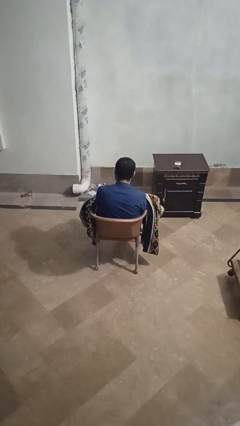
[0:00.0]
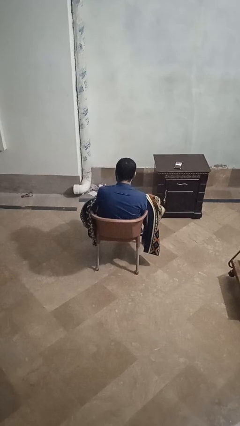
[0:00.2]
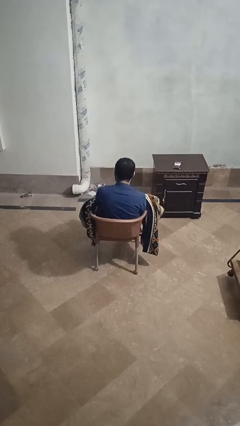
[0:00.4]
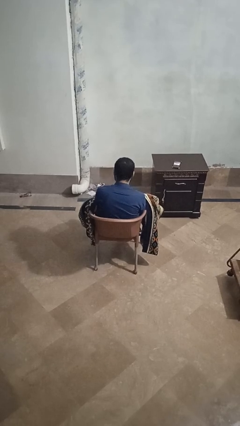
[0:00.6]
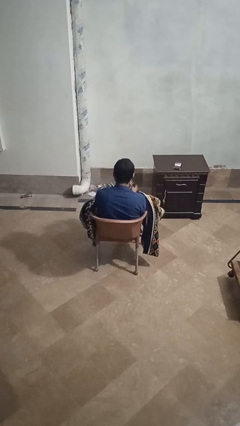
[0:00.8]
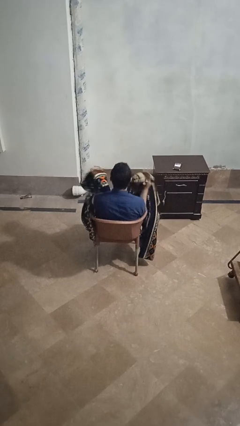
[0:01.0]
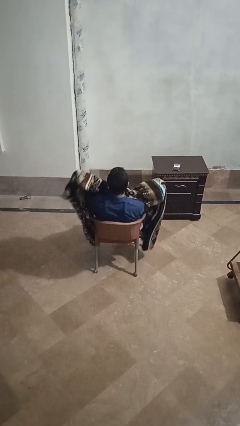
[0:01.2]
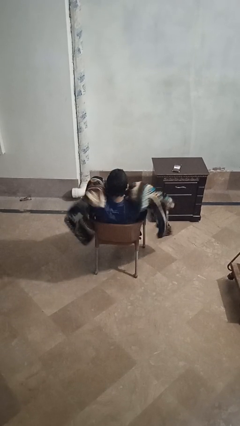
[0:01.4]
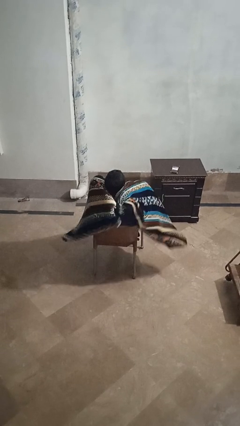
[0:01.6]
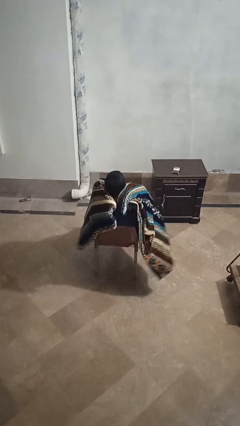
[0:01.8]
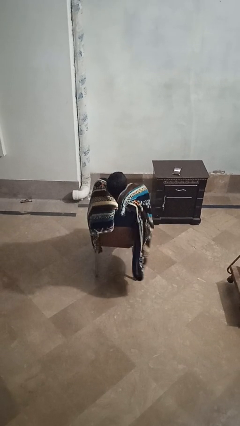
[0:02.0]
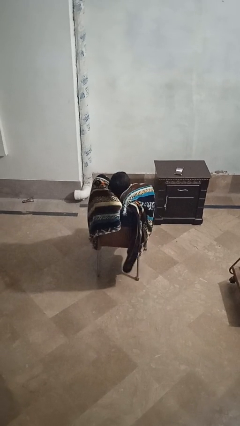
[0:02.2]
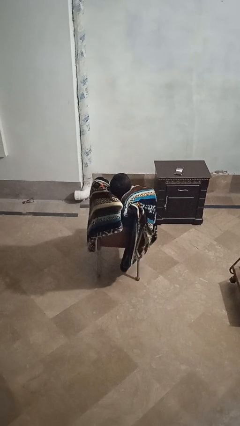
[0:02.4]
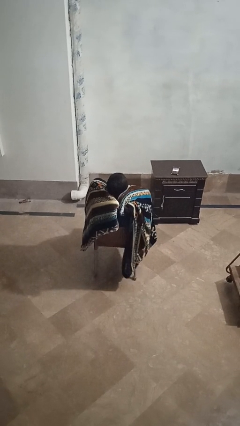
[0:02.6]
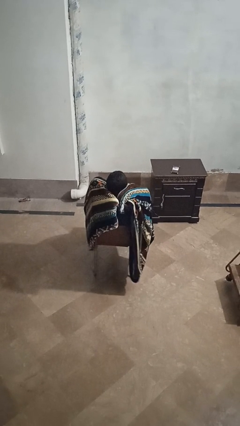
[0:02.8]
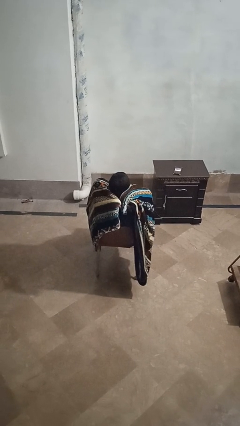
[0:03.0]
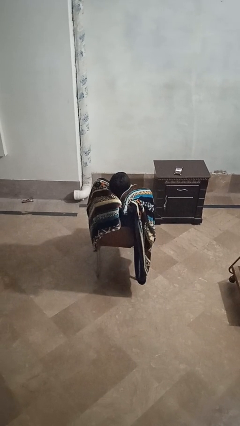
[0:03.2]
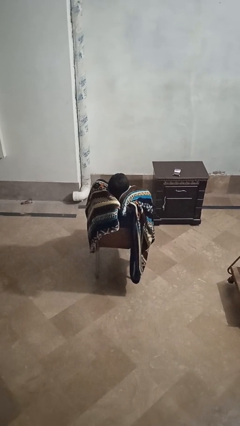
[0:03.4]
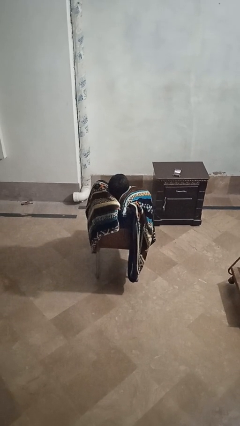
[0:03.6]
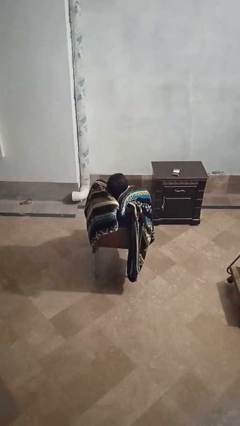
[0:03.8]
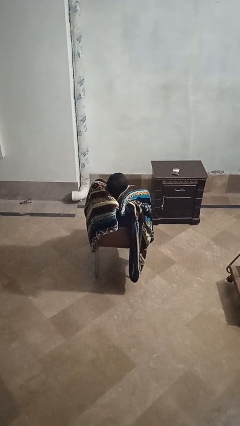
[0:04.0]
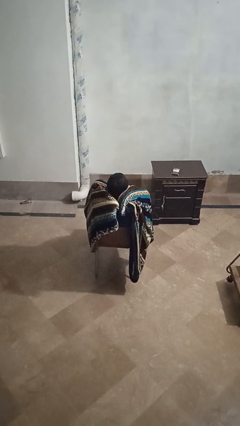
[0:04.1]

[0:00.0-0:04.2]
person covers with blanket

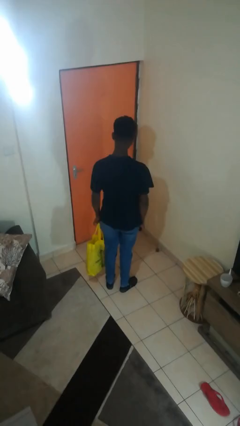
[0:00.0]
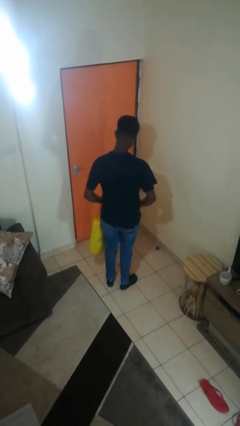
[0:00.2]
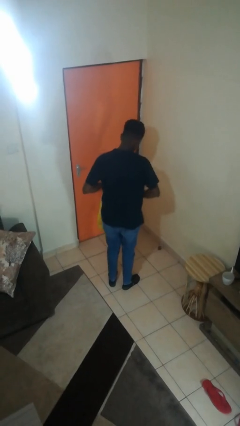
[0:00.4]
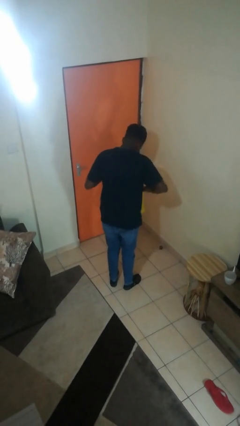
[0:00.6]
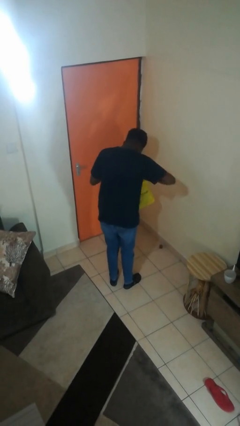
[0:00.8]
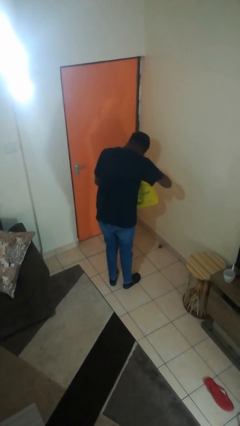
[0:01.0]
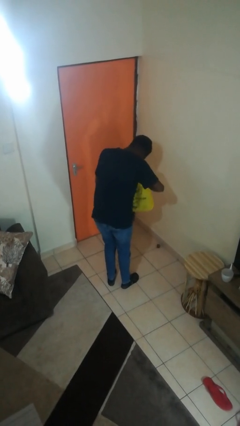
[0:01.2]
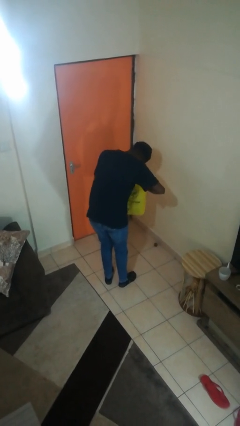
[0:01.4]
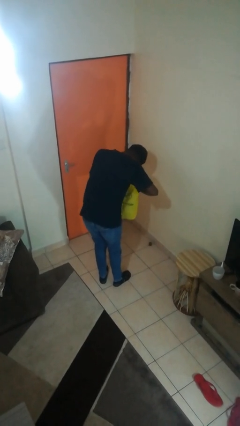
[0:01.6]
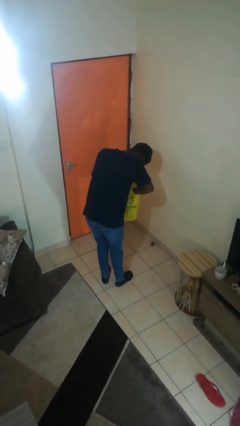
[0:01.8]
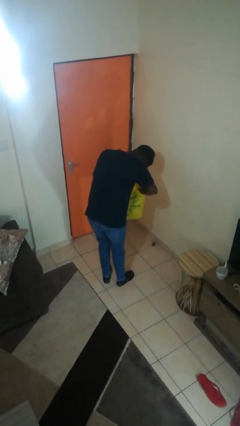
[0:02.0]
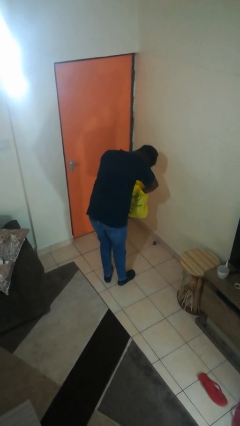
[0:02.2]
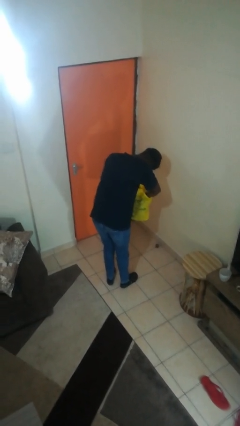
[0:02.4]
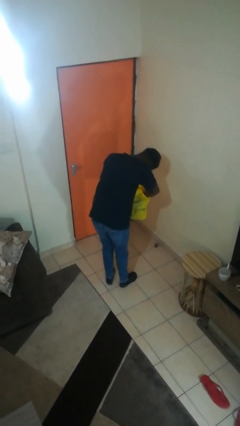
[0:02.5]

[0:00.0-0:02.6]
person searches in bag

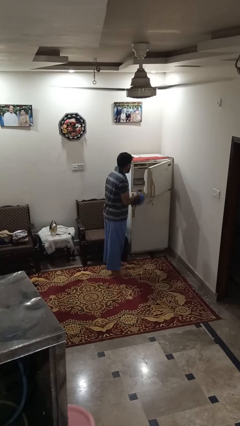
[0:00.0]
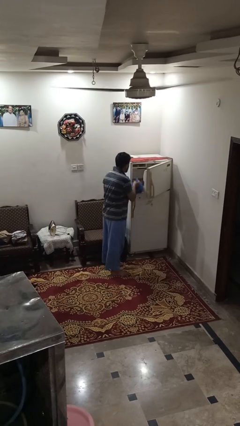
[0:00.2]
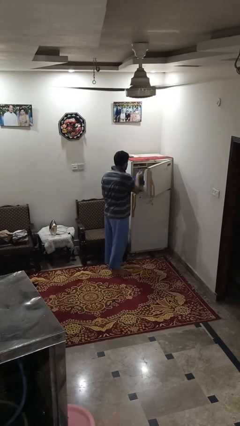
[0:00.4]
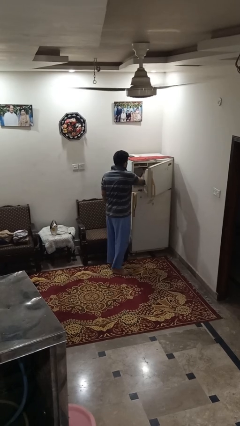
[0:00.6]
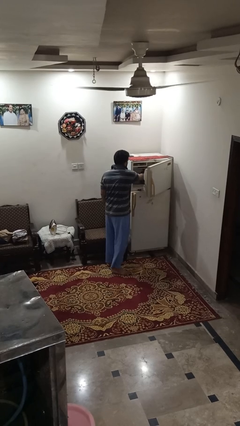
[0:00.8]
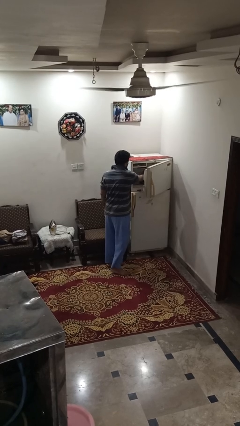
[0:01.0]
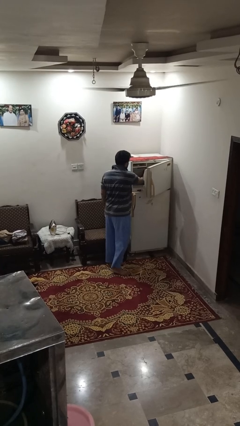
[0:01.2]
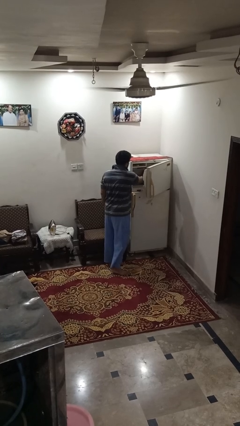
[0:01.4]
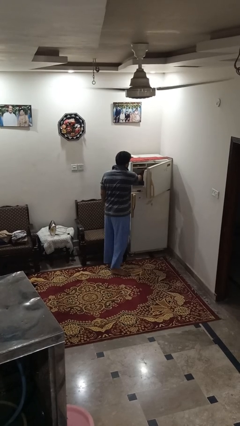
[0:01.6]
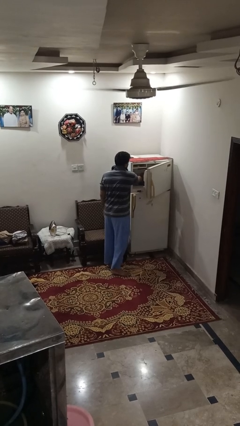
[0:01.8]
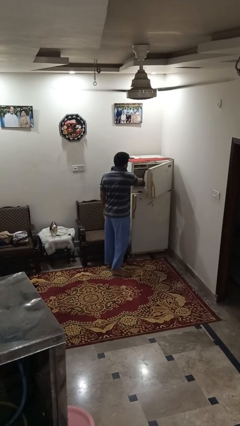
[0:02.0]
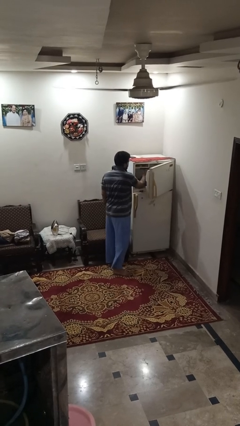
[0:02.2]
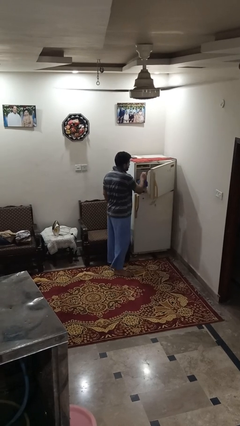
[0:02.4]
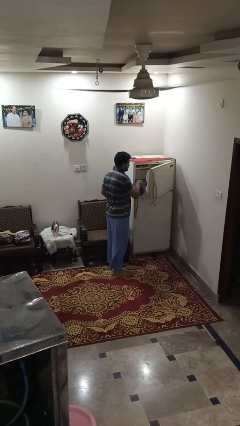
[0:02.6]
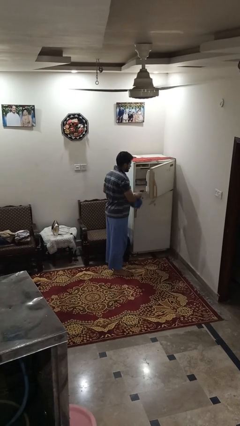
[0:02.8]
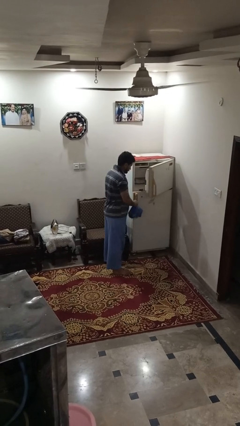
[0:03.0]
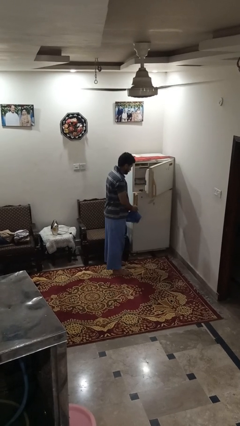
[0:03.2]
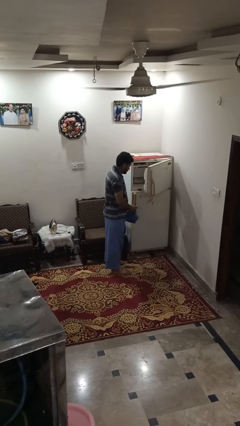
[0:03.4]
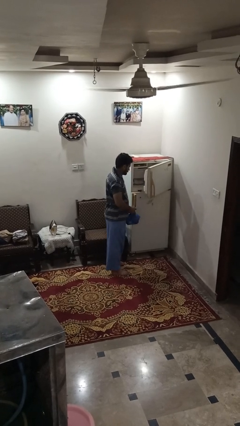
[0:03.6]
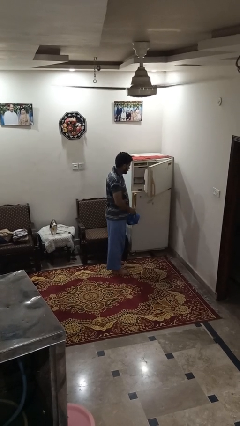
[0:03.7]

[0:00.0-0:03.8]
person loads groceries into refrigerator

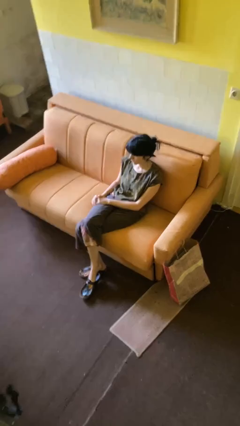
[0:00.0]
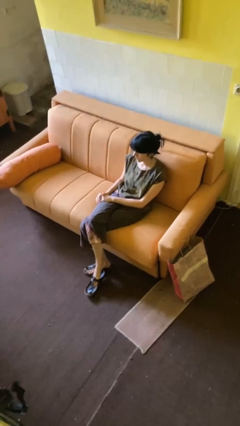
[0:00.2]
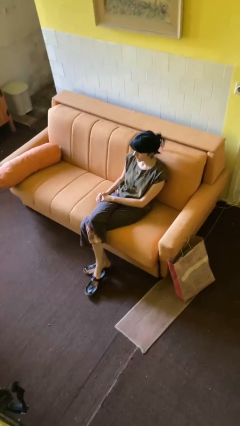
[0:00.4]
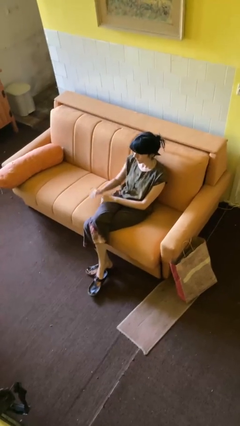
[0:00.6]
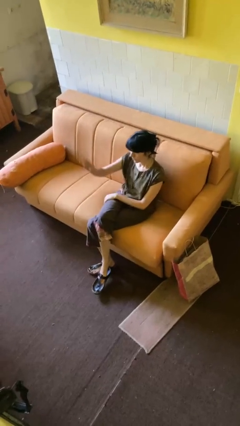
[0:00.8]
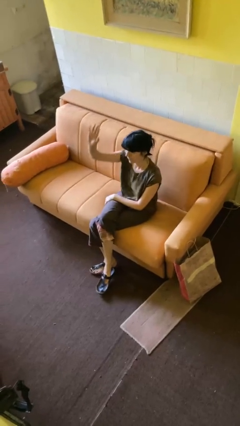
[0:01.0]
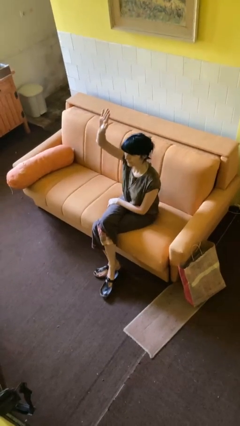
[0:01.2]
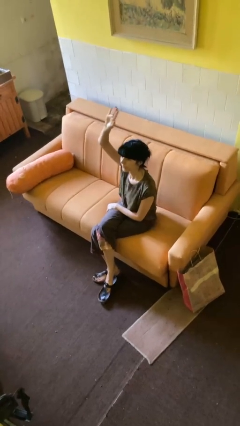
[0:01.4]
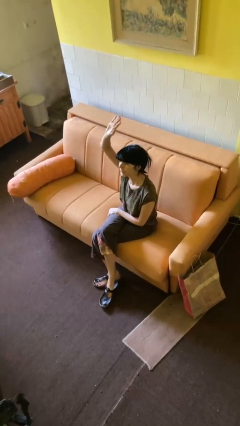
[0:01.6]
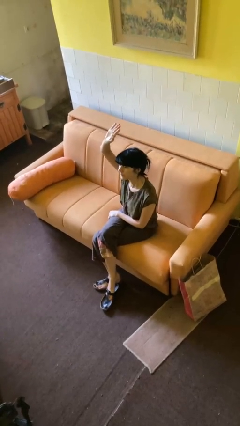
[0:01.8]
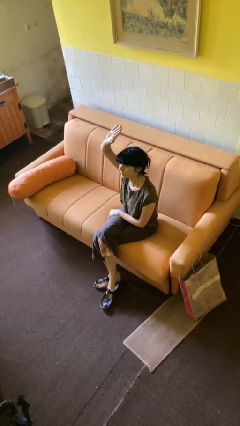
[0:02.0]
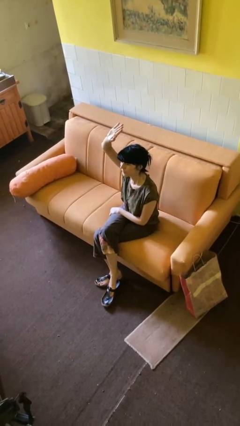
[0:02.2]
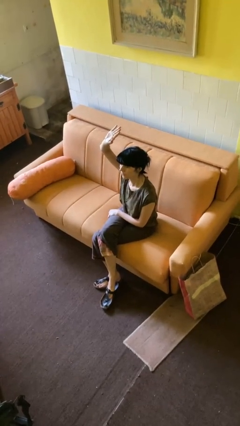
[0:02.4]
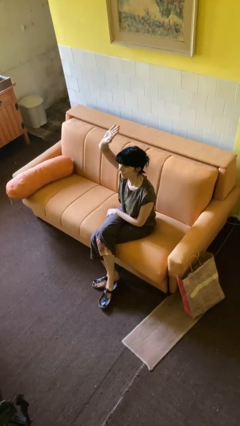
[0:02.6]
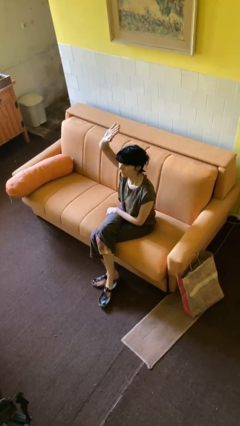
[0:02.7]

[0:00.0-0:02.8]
person gestures raise hand

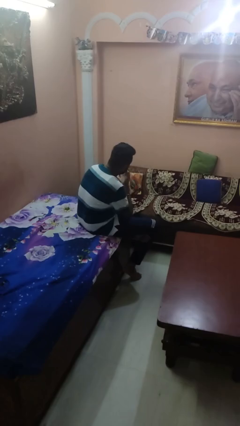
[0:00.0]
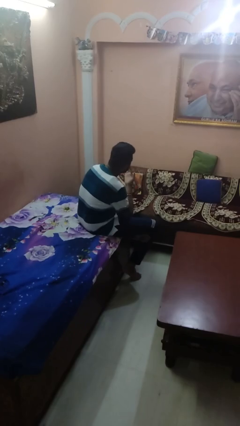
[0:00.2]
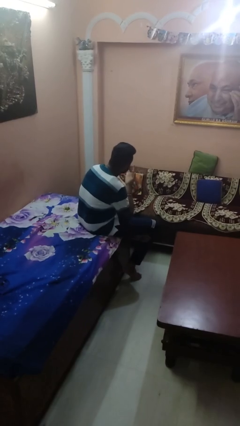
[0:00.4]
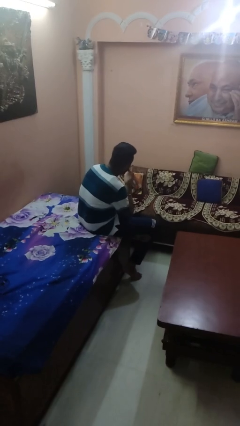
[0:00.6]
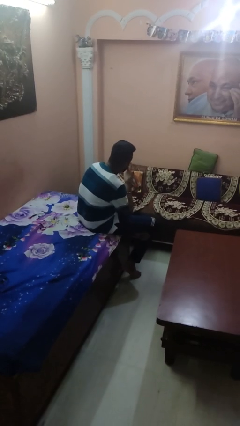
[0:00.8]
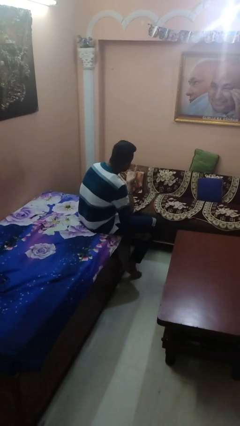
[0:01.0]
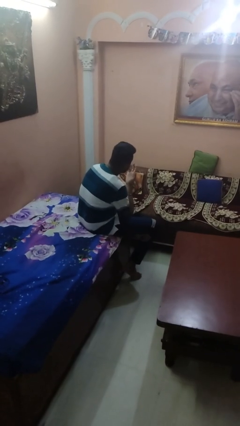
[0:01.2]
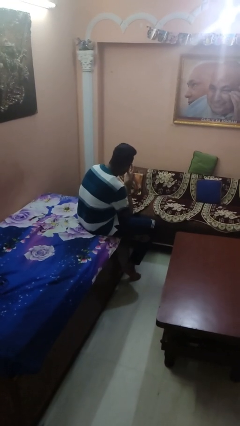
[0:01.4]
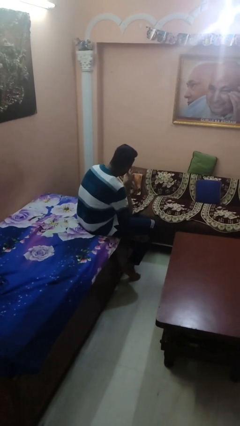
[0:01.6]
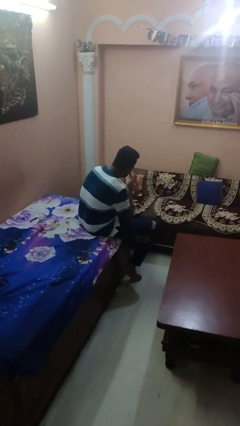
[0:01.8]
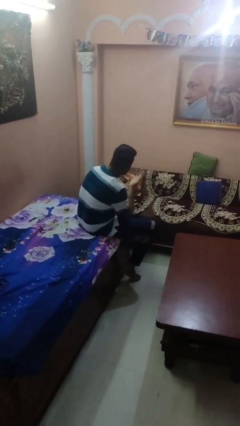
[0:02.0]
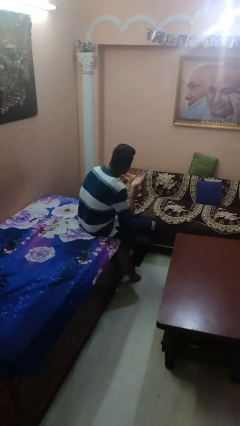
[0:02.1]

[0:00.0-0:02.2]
person licks fingers

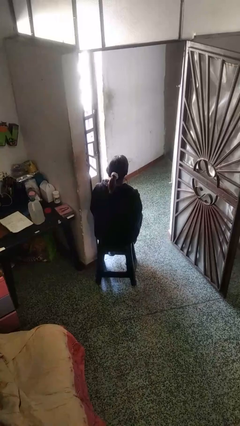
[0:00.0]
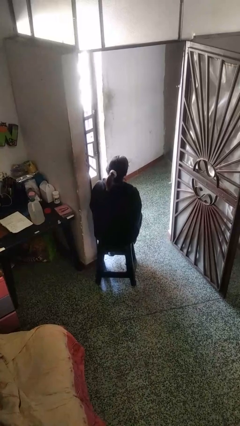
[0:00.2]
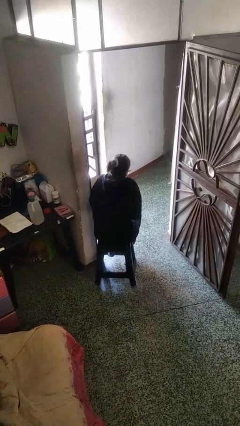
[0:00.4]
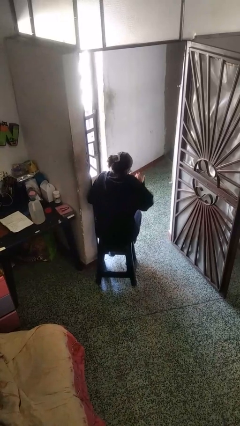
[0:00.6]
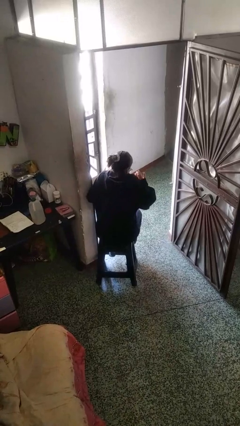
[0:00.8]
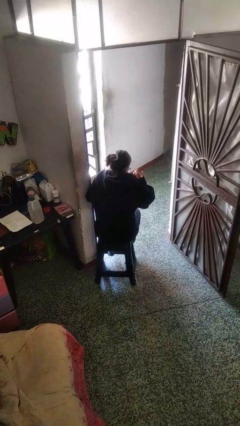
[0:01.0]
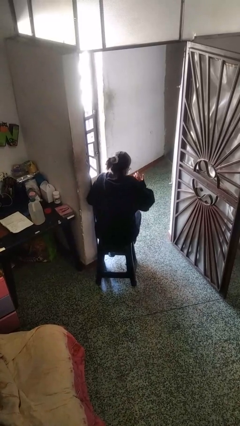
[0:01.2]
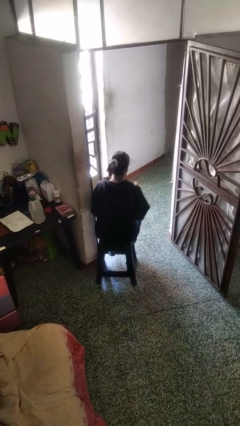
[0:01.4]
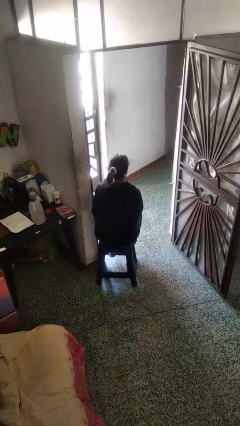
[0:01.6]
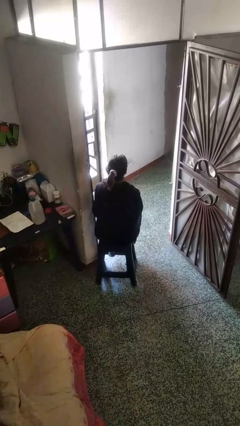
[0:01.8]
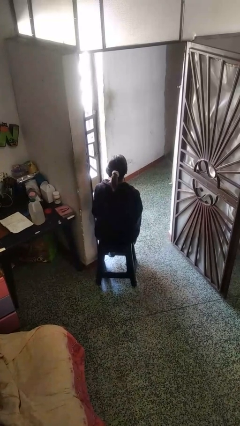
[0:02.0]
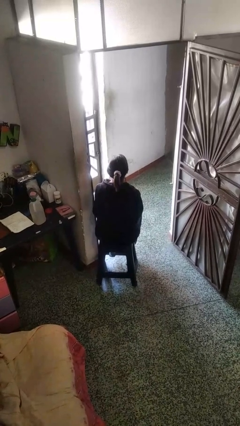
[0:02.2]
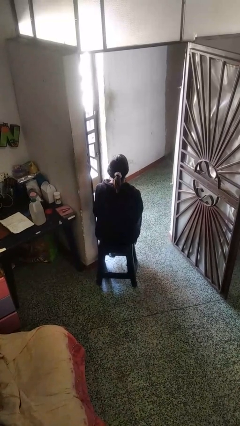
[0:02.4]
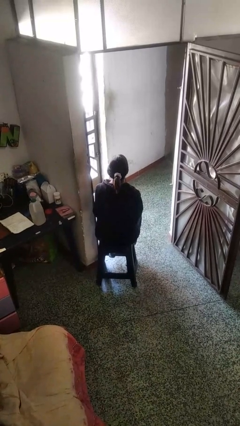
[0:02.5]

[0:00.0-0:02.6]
person shrugs
